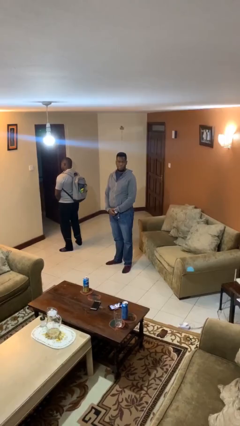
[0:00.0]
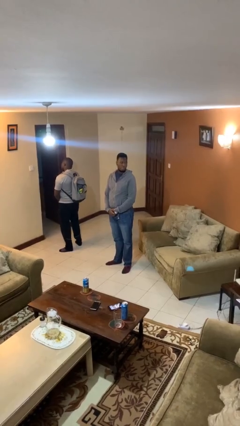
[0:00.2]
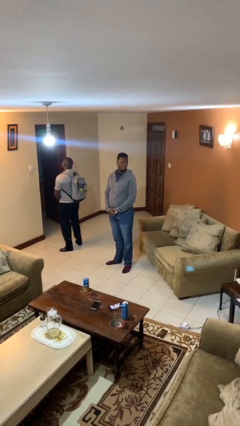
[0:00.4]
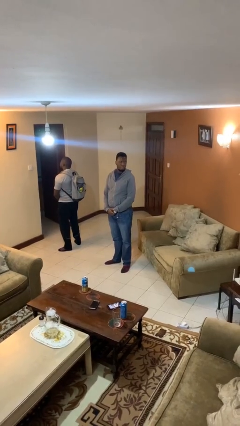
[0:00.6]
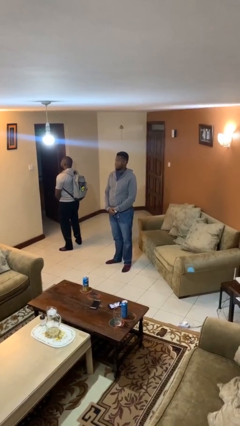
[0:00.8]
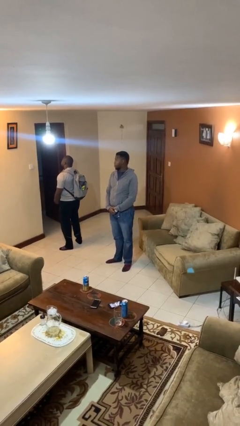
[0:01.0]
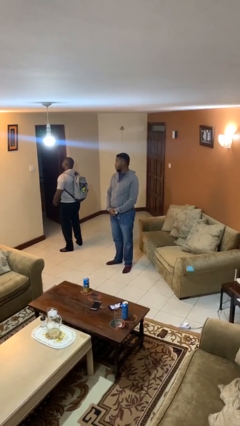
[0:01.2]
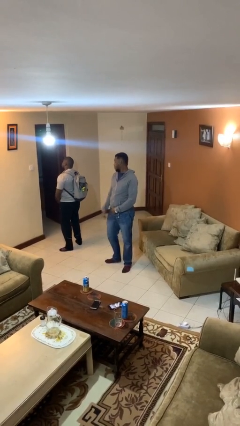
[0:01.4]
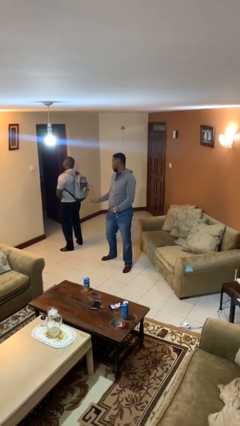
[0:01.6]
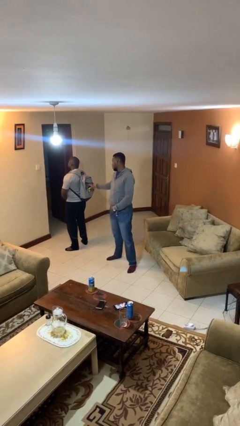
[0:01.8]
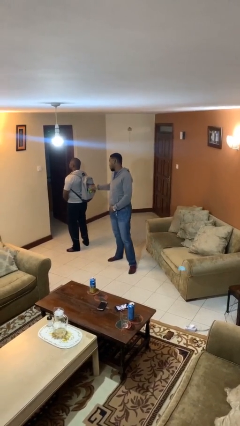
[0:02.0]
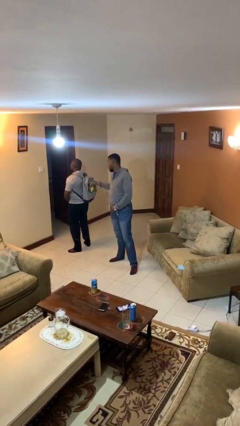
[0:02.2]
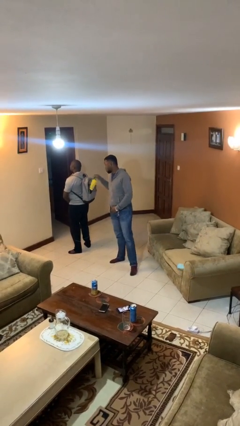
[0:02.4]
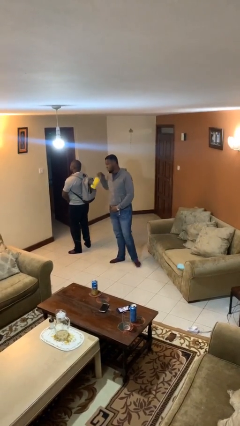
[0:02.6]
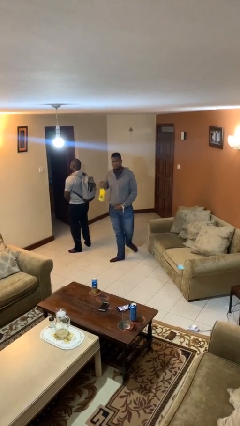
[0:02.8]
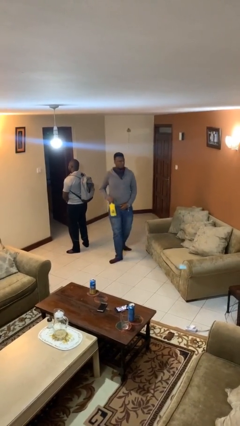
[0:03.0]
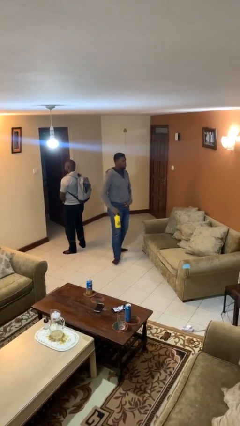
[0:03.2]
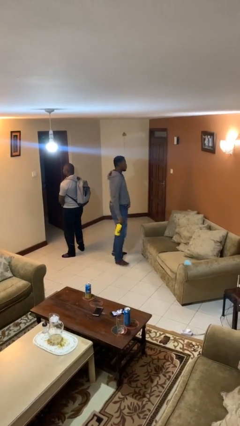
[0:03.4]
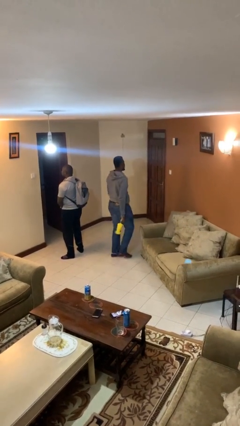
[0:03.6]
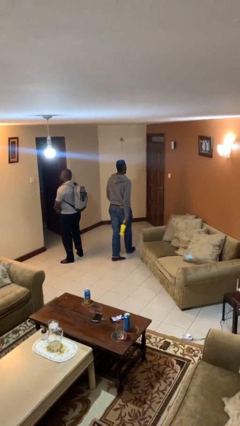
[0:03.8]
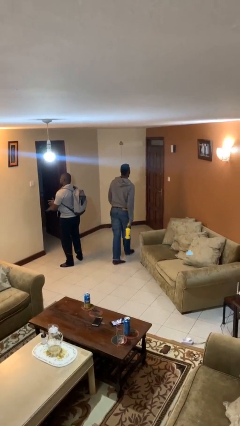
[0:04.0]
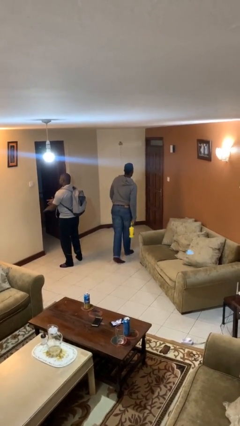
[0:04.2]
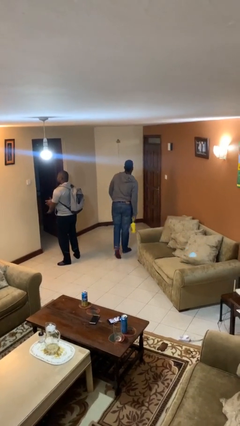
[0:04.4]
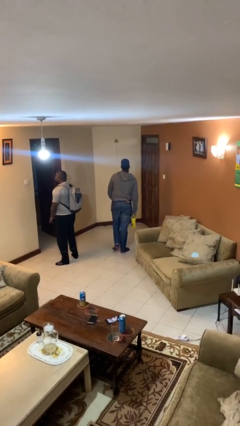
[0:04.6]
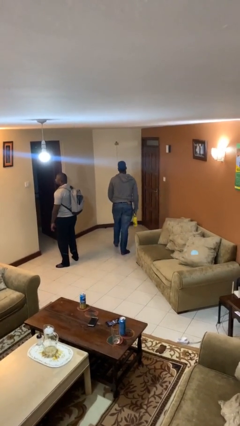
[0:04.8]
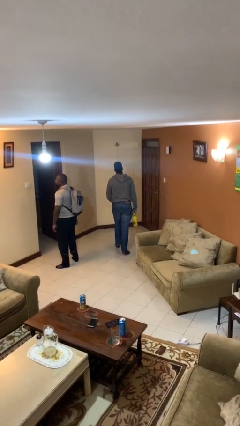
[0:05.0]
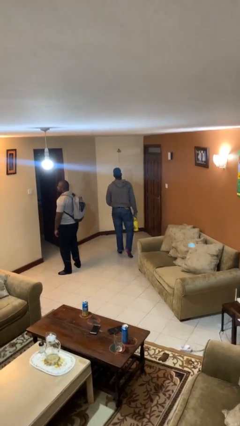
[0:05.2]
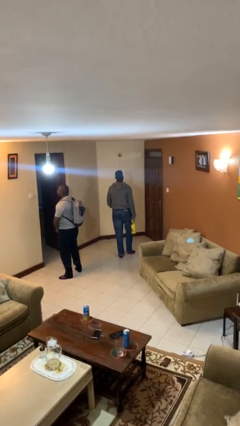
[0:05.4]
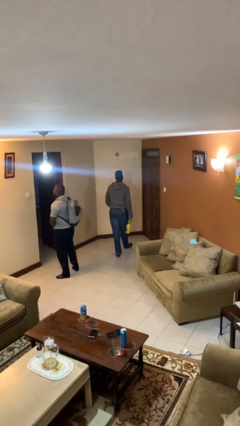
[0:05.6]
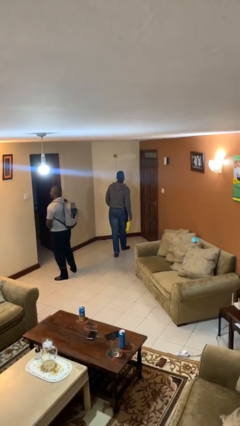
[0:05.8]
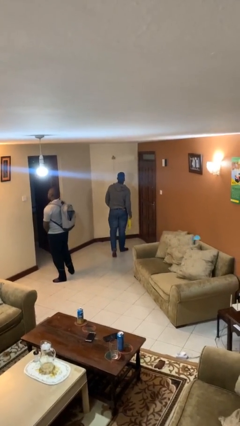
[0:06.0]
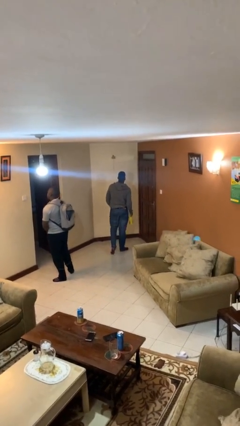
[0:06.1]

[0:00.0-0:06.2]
person steals object from person

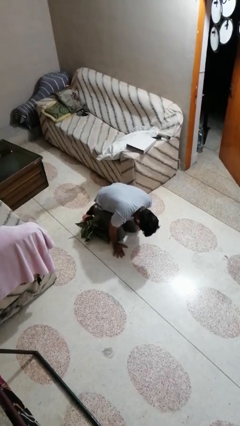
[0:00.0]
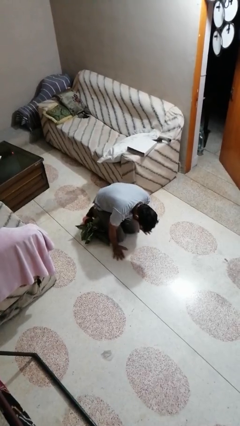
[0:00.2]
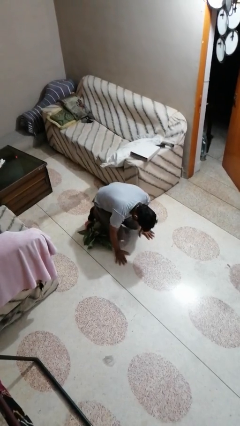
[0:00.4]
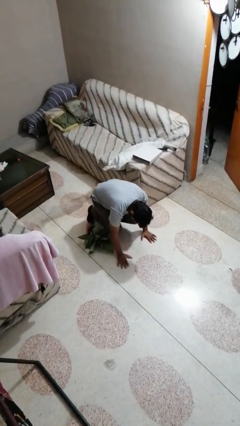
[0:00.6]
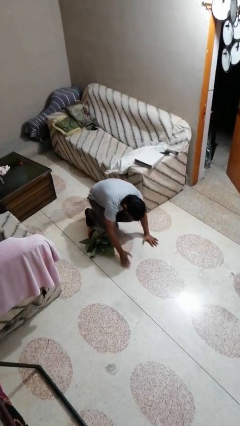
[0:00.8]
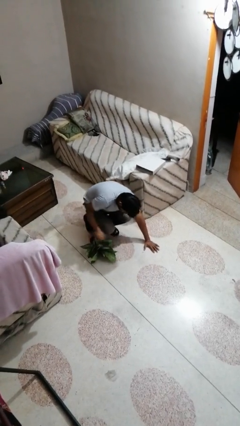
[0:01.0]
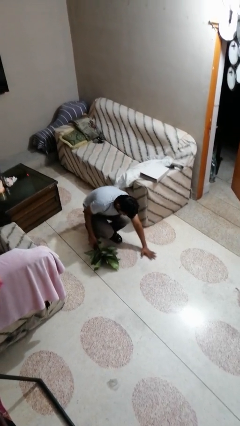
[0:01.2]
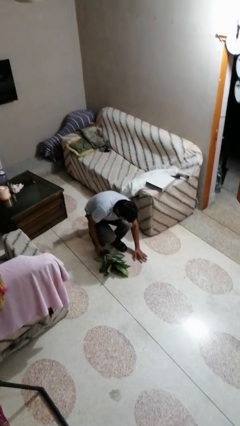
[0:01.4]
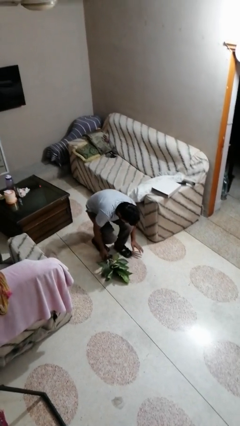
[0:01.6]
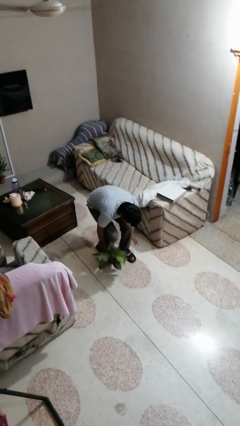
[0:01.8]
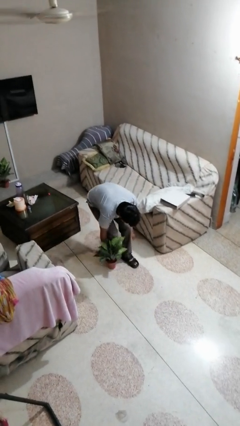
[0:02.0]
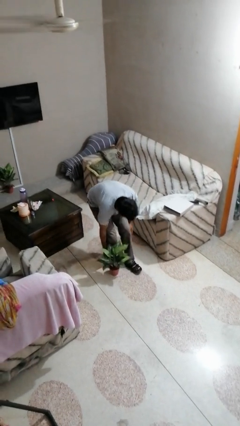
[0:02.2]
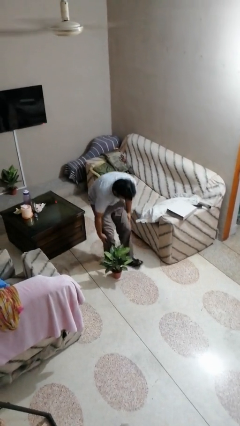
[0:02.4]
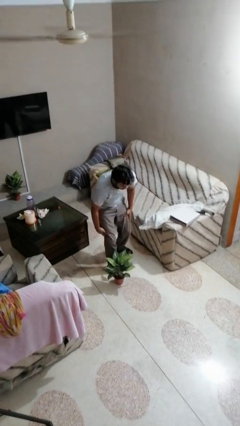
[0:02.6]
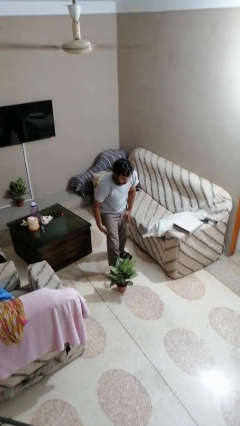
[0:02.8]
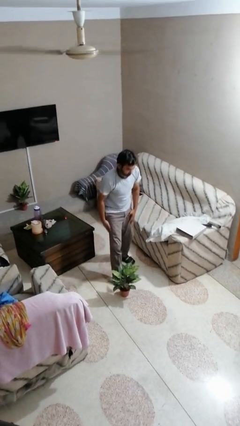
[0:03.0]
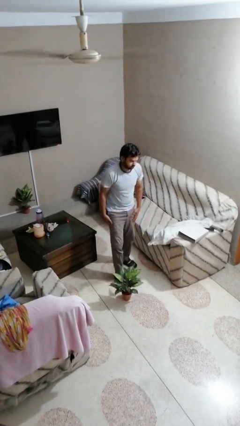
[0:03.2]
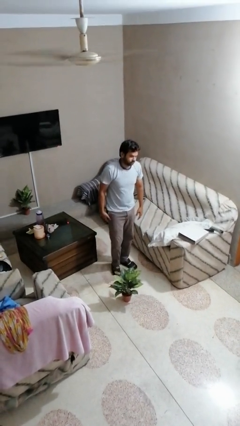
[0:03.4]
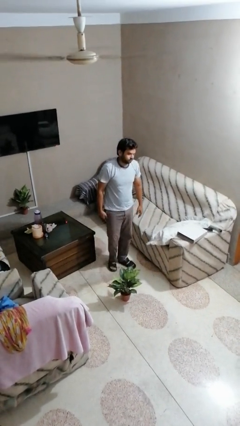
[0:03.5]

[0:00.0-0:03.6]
person stands up from floor

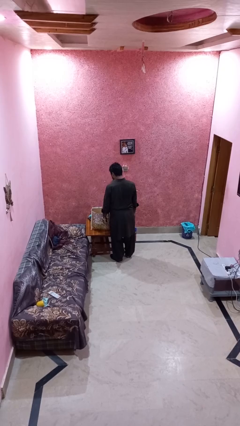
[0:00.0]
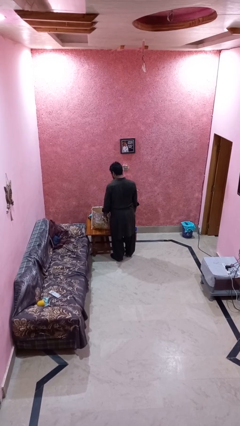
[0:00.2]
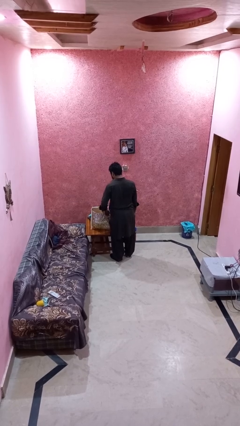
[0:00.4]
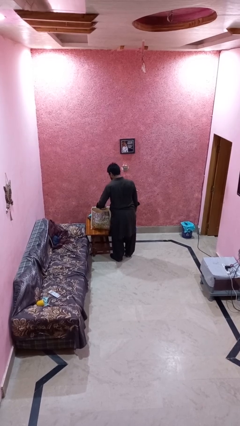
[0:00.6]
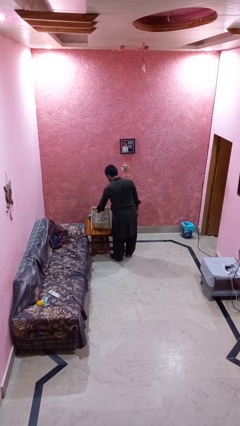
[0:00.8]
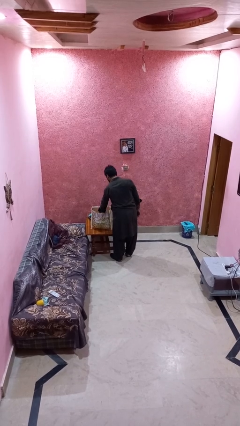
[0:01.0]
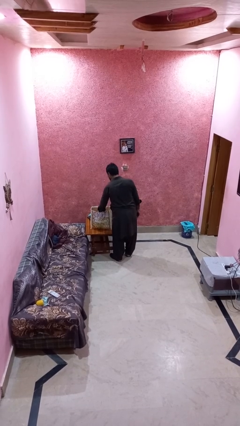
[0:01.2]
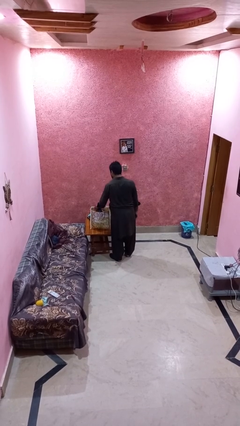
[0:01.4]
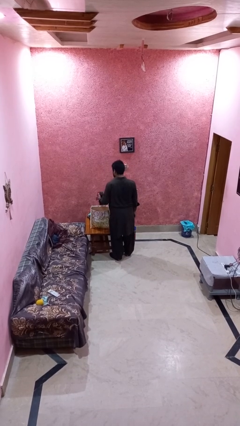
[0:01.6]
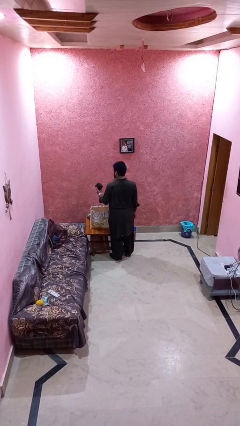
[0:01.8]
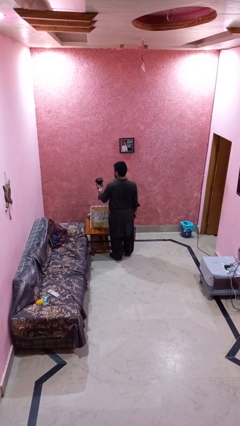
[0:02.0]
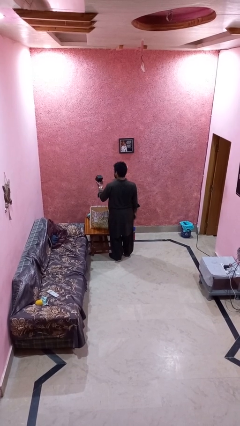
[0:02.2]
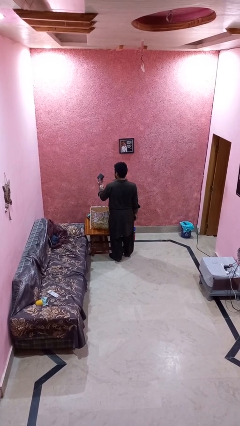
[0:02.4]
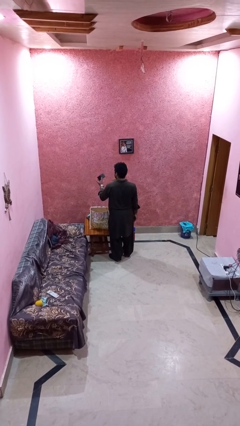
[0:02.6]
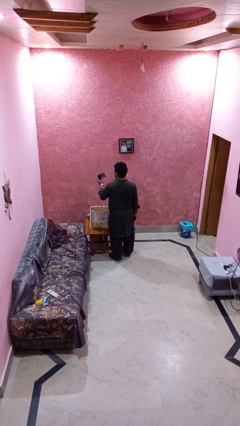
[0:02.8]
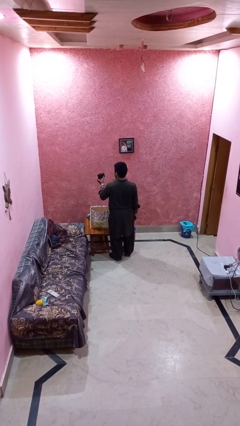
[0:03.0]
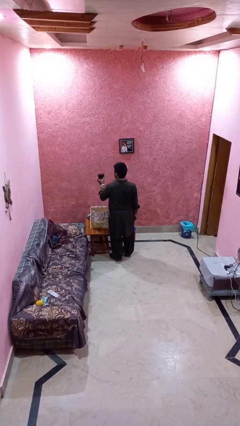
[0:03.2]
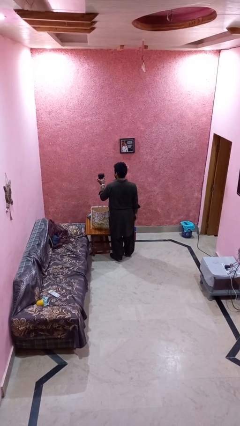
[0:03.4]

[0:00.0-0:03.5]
person takes object from bag

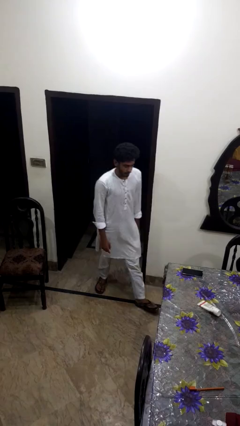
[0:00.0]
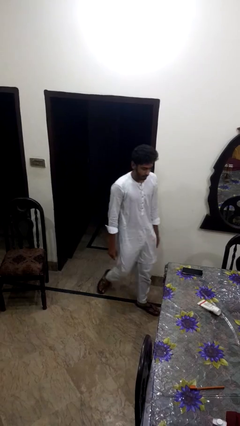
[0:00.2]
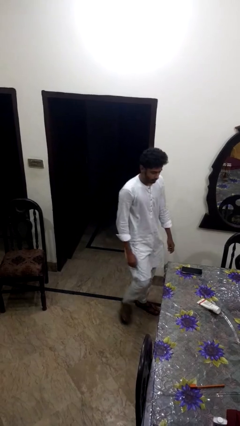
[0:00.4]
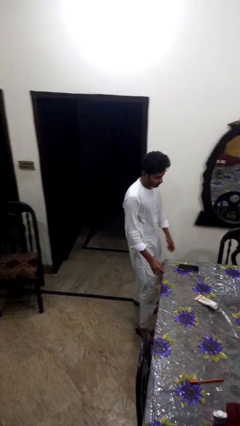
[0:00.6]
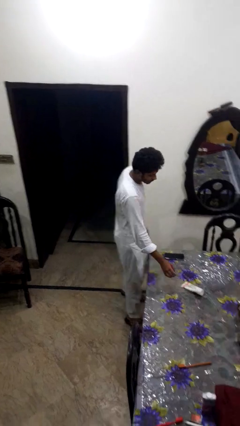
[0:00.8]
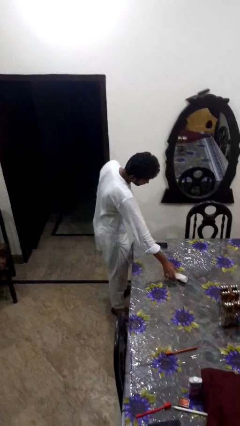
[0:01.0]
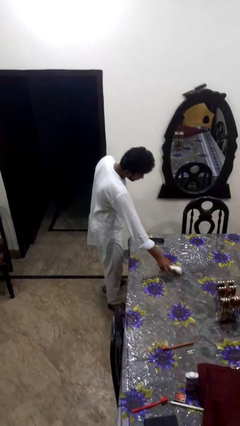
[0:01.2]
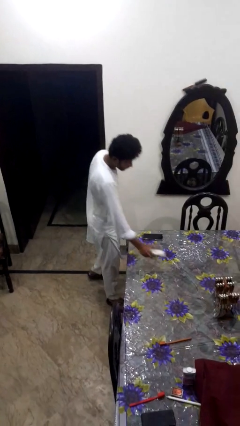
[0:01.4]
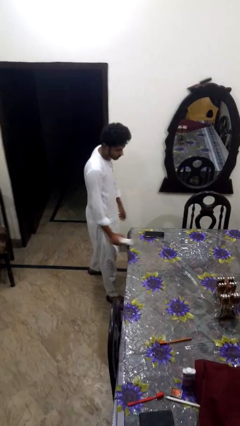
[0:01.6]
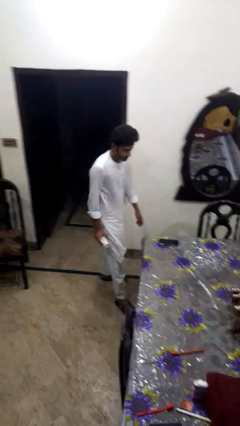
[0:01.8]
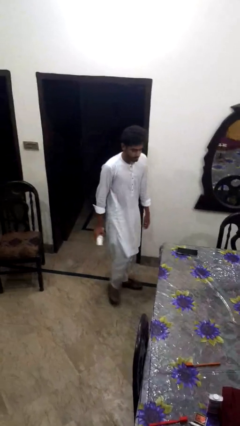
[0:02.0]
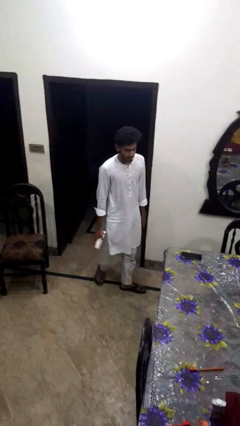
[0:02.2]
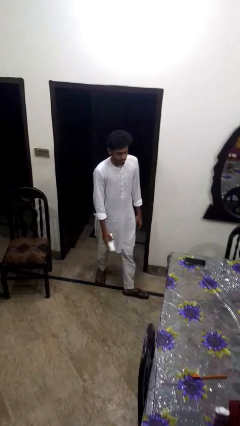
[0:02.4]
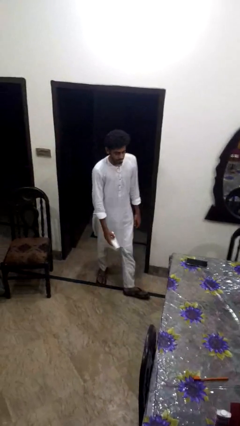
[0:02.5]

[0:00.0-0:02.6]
person picks up object from table

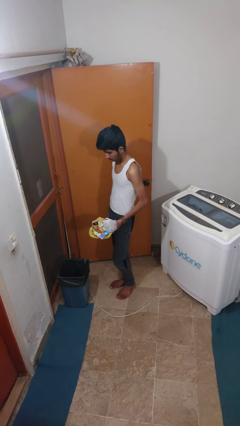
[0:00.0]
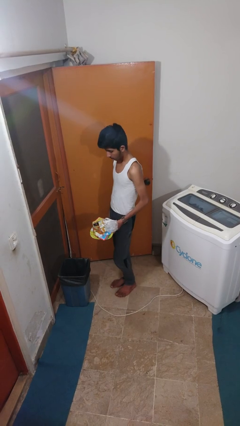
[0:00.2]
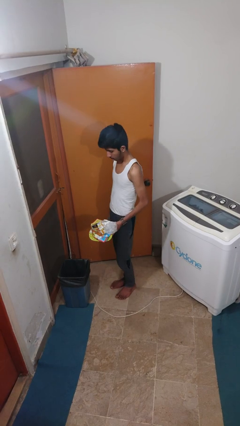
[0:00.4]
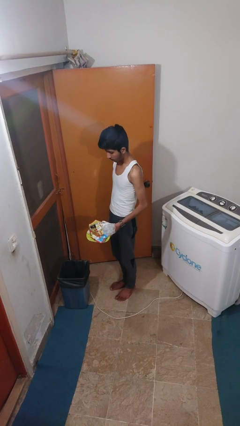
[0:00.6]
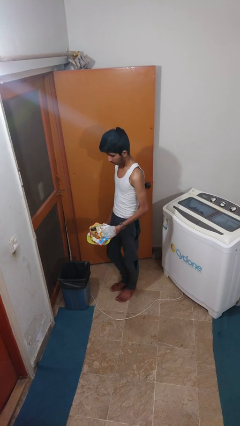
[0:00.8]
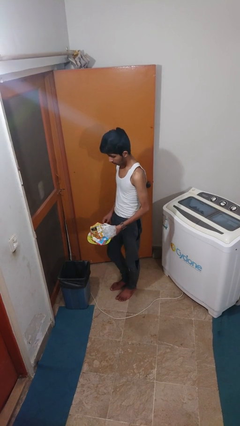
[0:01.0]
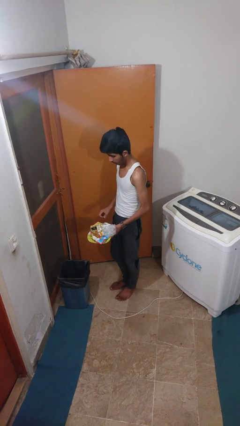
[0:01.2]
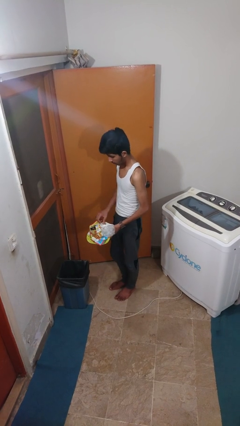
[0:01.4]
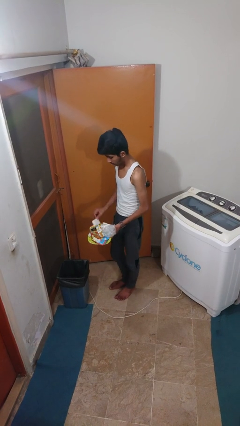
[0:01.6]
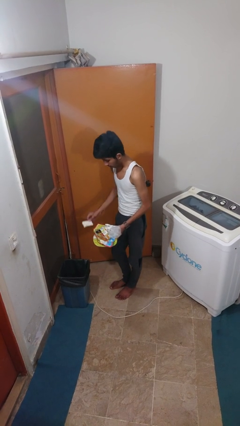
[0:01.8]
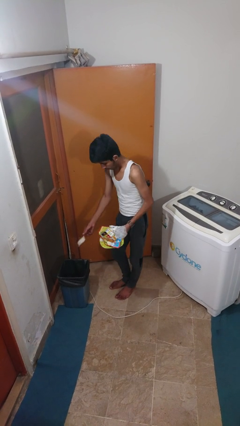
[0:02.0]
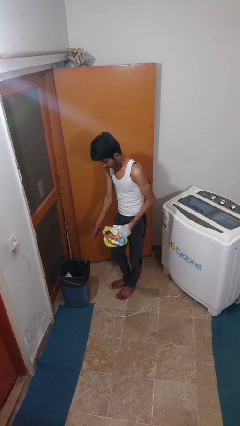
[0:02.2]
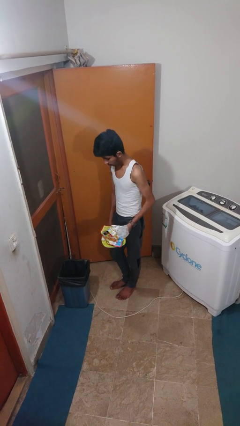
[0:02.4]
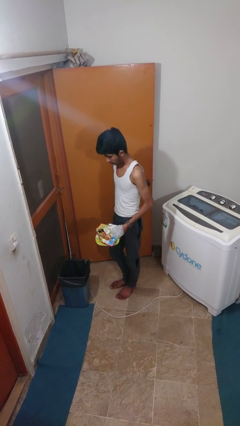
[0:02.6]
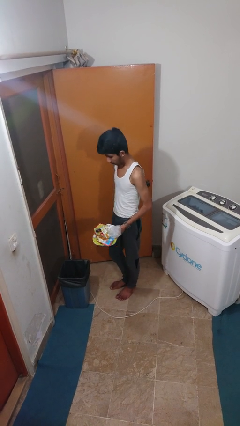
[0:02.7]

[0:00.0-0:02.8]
person discards trash
